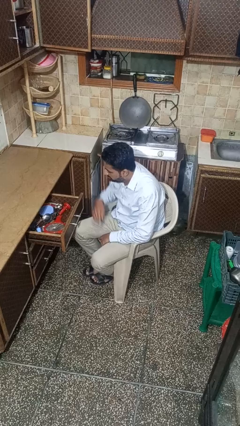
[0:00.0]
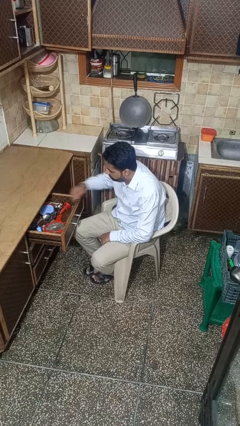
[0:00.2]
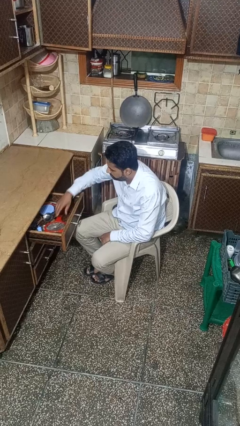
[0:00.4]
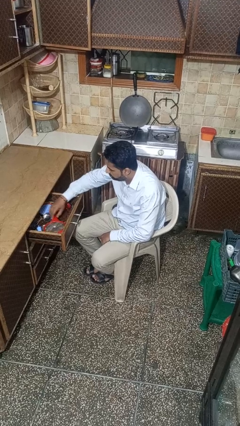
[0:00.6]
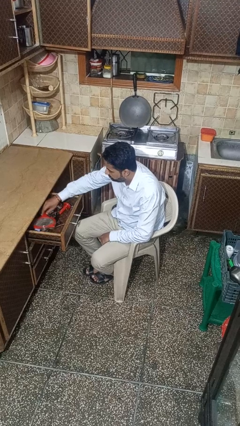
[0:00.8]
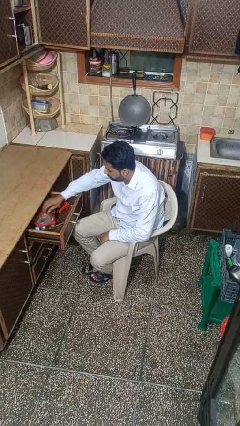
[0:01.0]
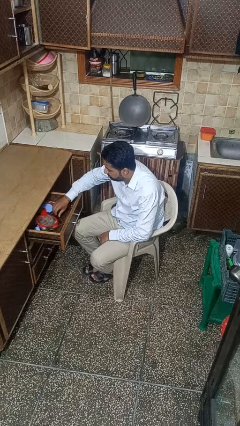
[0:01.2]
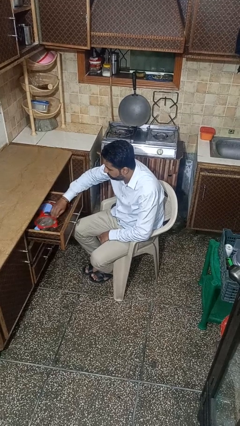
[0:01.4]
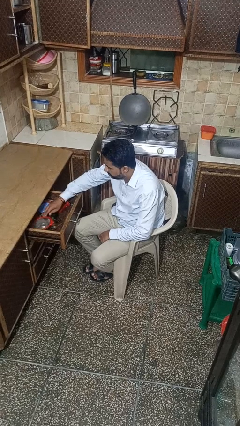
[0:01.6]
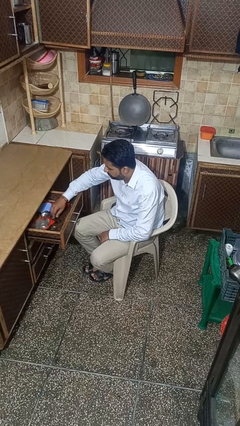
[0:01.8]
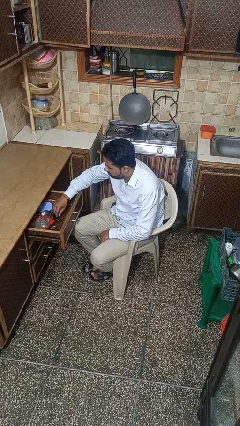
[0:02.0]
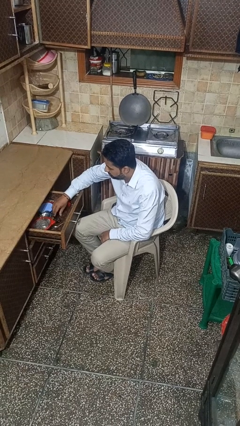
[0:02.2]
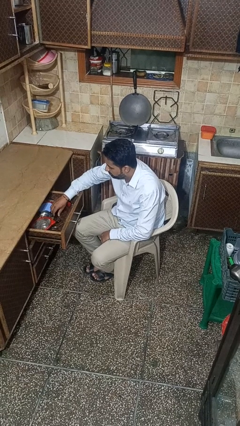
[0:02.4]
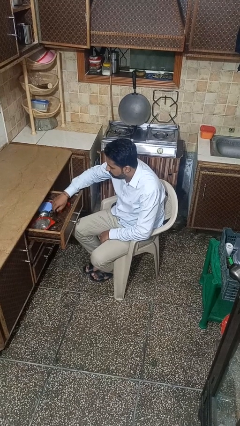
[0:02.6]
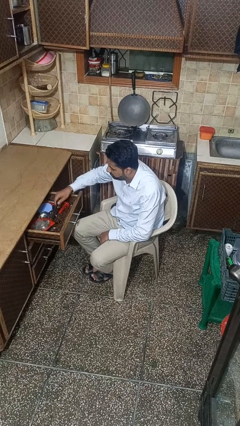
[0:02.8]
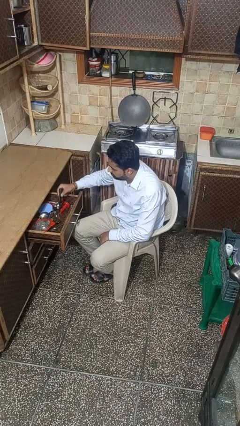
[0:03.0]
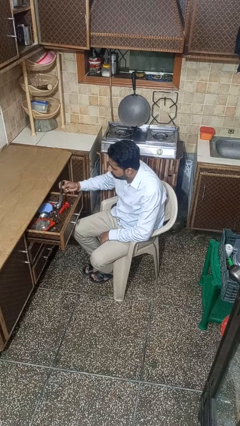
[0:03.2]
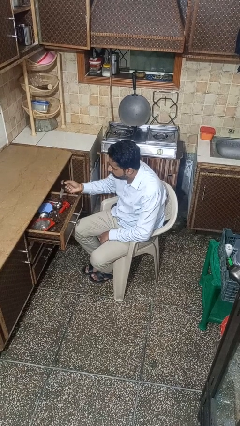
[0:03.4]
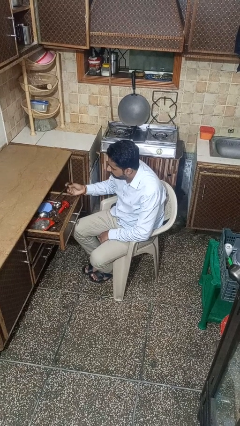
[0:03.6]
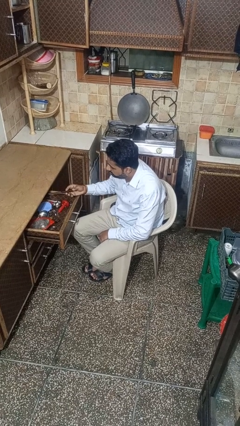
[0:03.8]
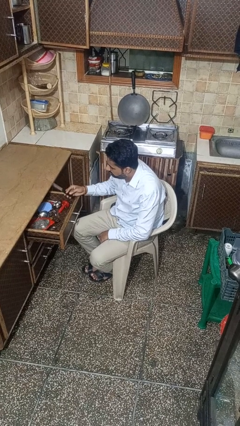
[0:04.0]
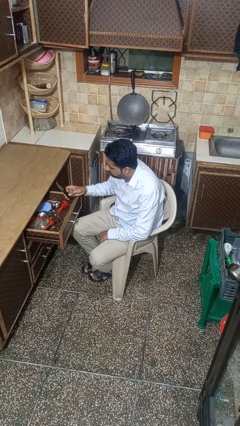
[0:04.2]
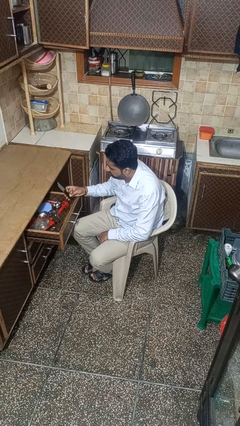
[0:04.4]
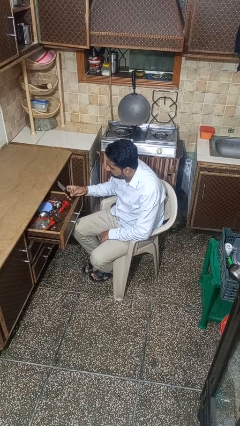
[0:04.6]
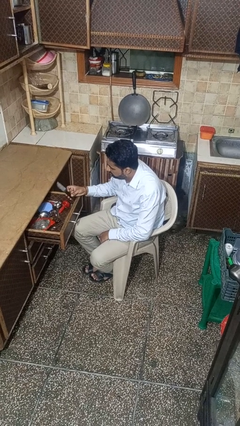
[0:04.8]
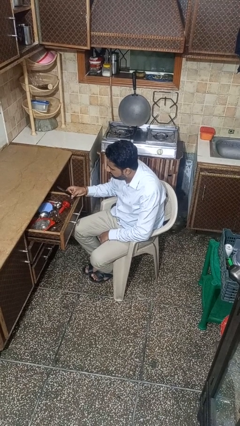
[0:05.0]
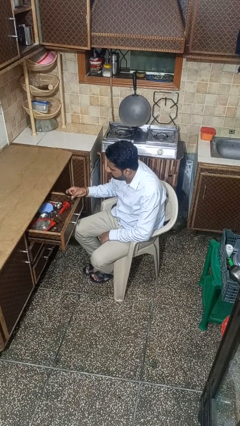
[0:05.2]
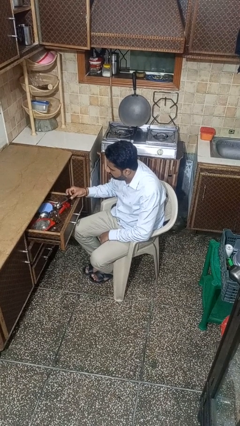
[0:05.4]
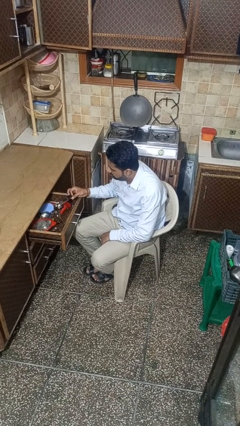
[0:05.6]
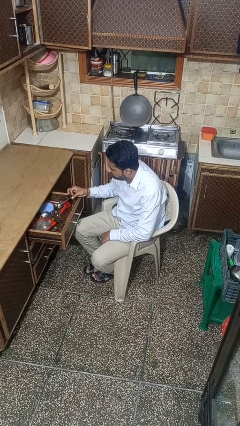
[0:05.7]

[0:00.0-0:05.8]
person takes object from kitchen drawer

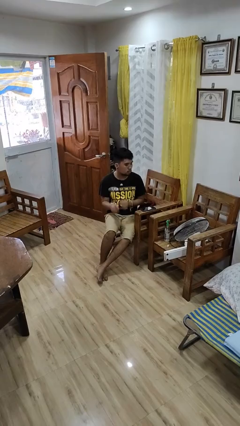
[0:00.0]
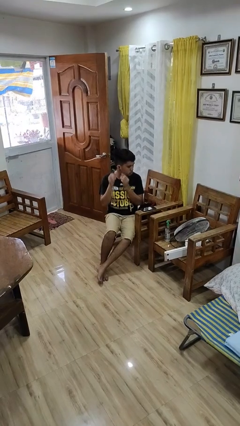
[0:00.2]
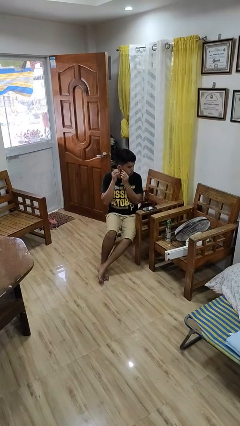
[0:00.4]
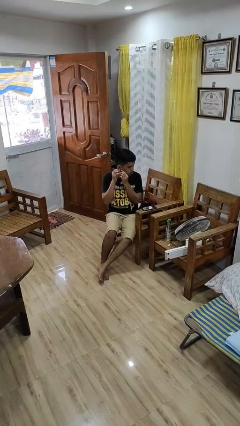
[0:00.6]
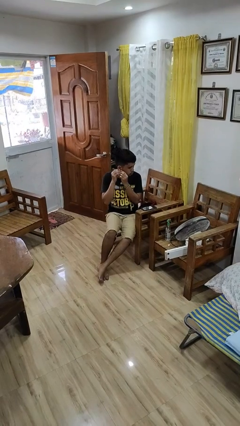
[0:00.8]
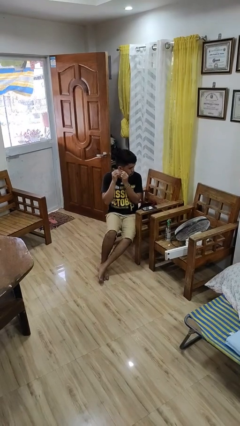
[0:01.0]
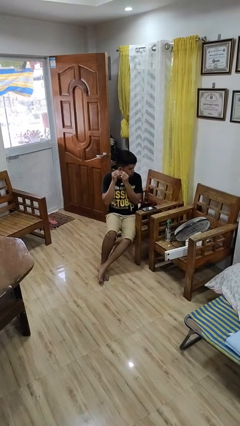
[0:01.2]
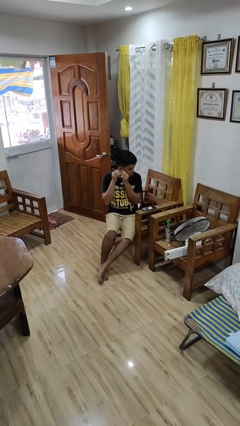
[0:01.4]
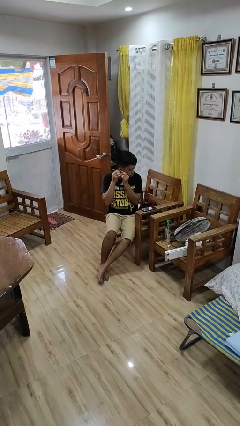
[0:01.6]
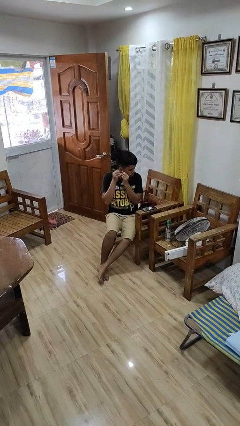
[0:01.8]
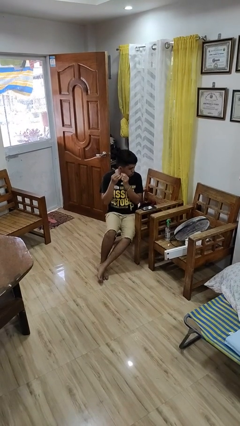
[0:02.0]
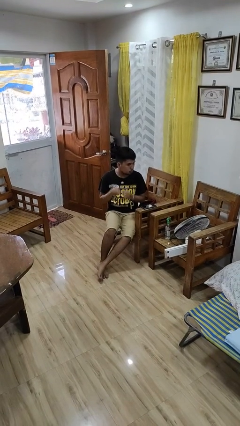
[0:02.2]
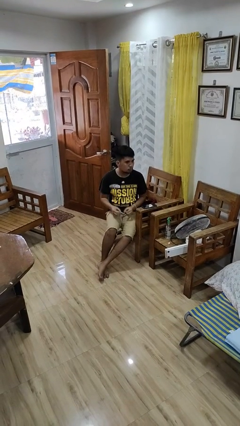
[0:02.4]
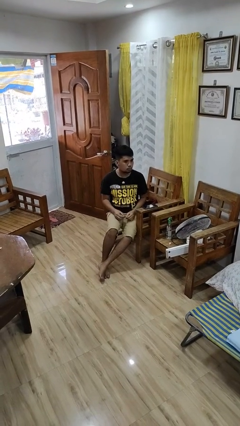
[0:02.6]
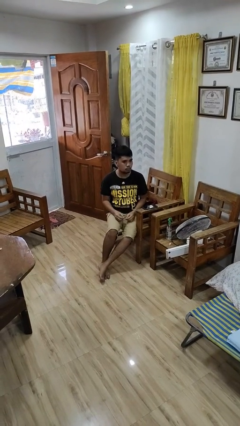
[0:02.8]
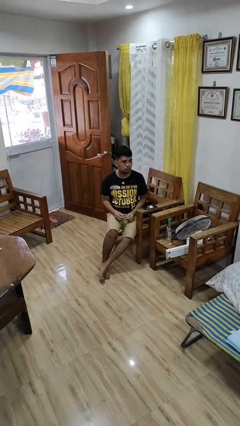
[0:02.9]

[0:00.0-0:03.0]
person takes off earrings

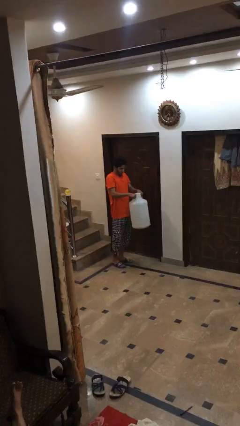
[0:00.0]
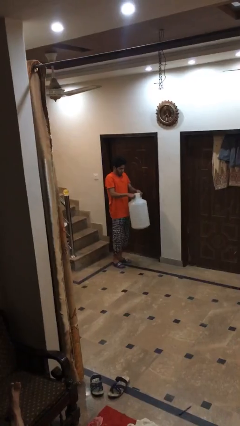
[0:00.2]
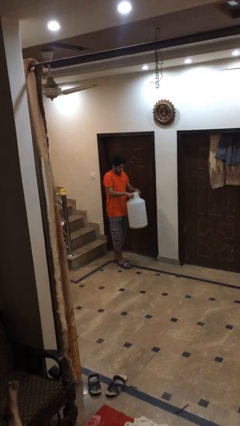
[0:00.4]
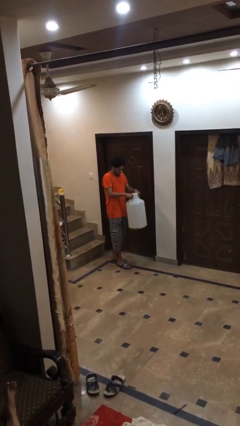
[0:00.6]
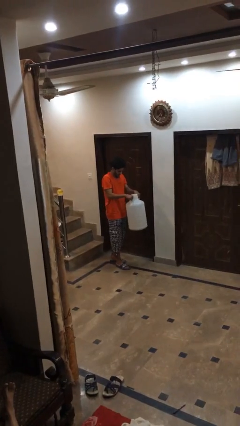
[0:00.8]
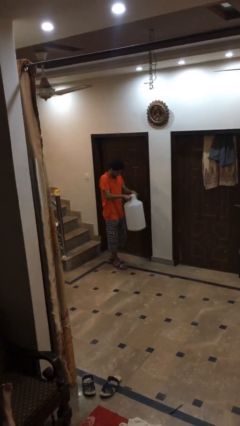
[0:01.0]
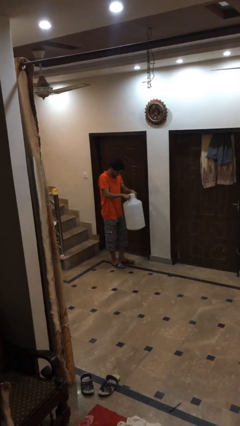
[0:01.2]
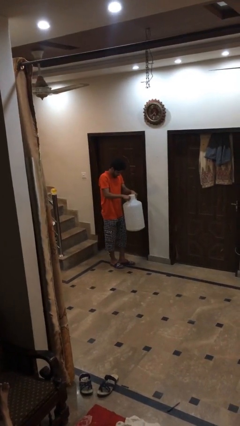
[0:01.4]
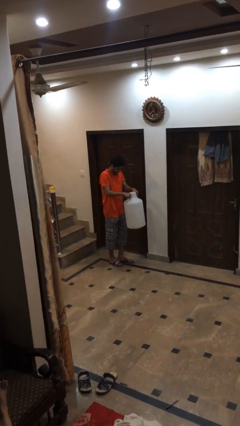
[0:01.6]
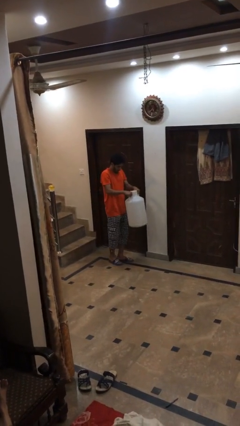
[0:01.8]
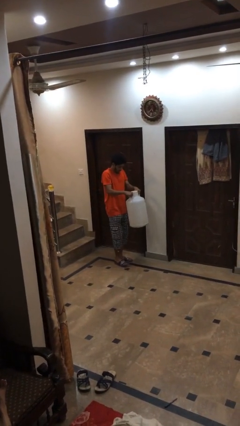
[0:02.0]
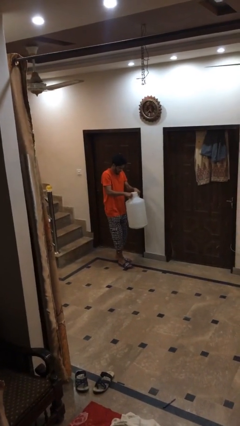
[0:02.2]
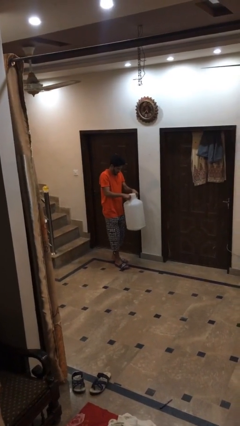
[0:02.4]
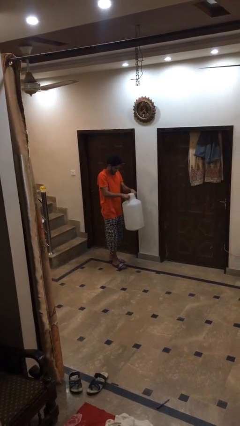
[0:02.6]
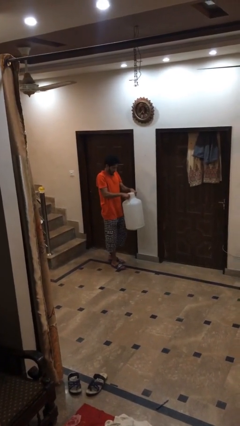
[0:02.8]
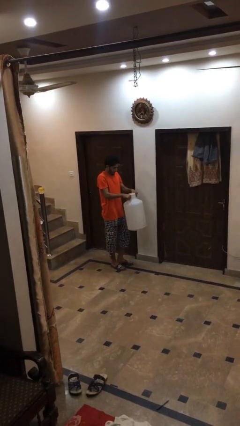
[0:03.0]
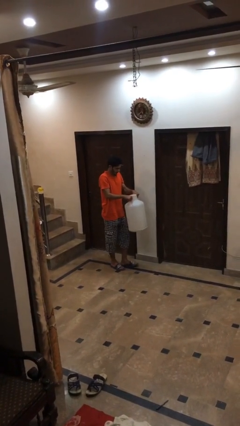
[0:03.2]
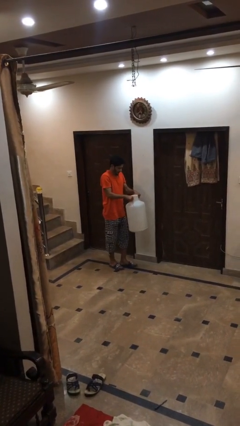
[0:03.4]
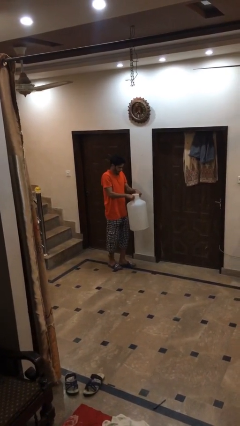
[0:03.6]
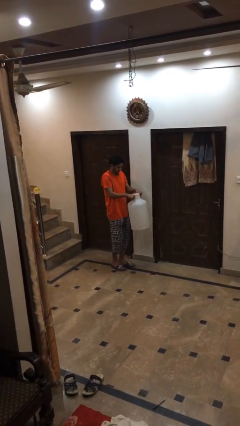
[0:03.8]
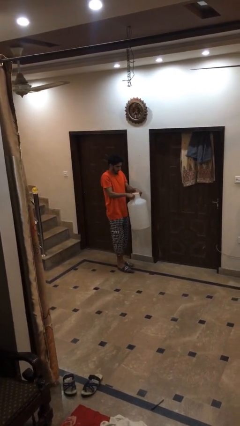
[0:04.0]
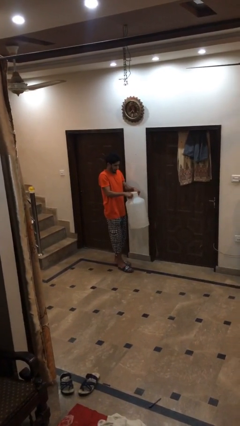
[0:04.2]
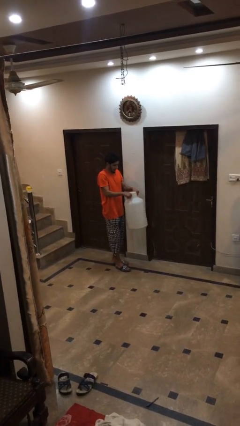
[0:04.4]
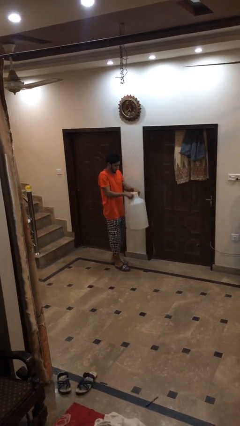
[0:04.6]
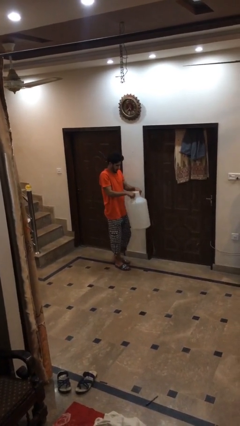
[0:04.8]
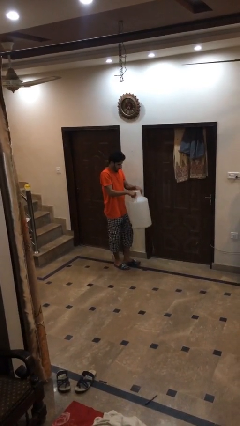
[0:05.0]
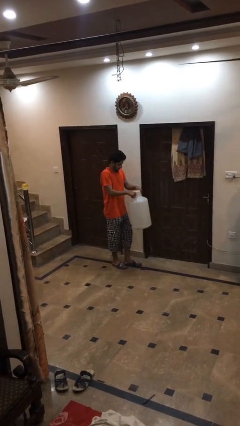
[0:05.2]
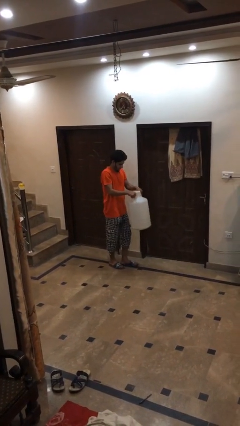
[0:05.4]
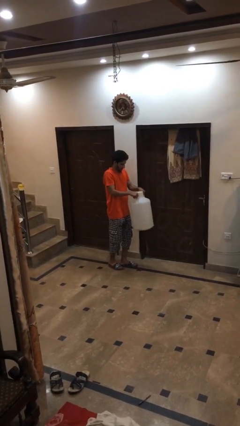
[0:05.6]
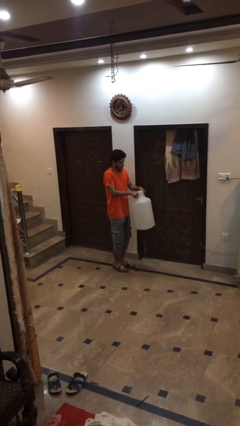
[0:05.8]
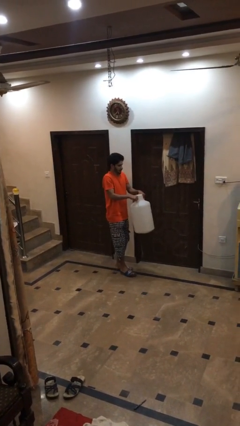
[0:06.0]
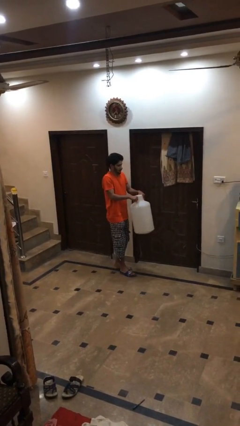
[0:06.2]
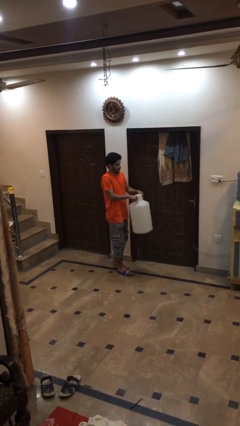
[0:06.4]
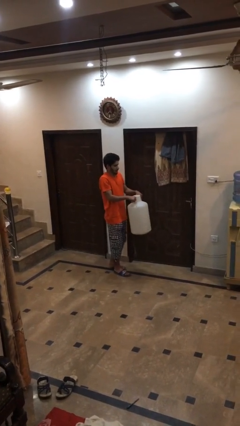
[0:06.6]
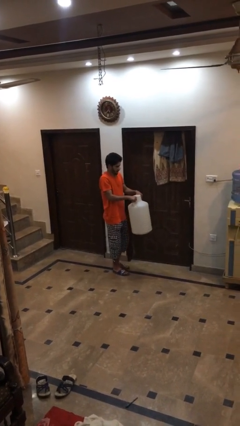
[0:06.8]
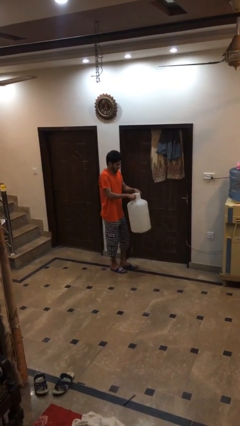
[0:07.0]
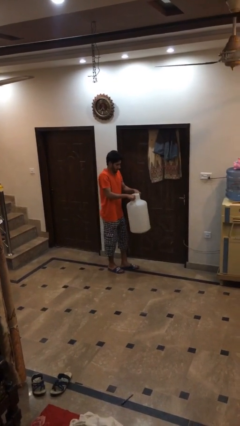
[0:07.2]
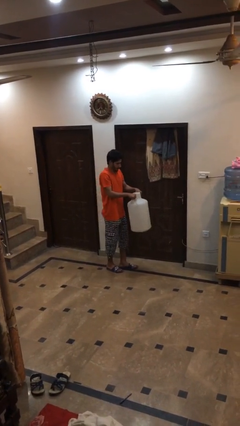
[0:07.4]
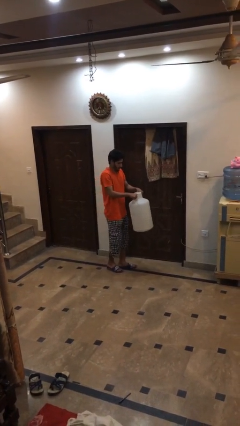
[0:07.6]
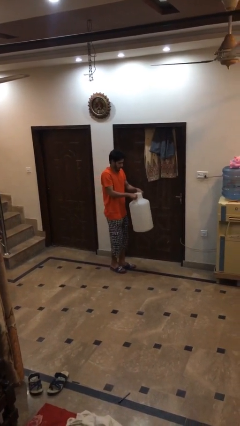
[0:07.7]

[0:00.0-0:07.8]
person carries heavy object

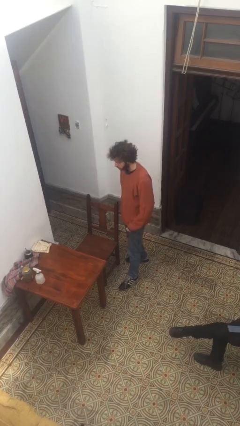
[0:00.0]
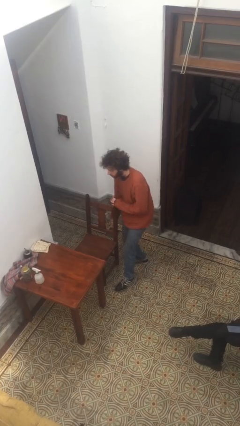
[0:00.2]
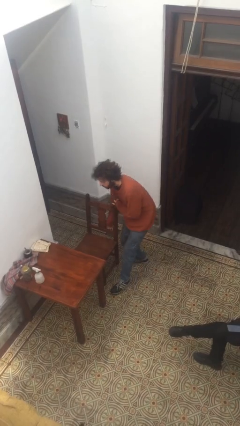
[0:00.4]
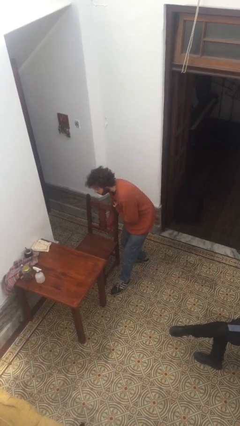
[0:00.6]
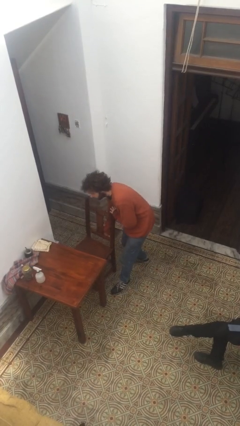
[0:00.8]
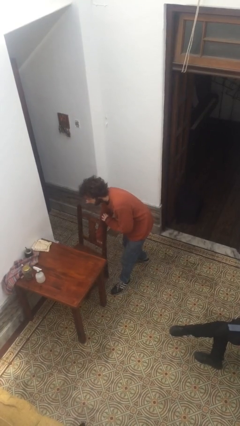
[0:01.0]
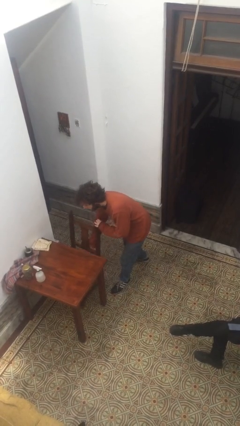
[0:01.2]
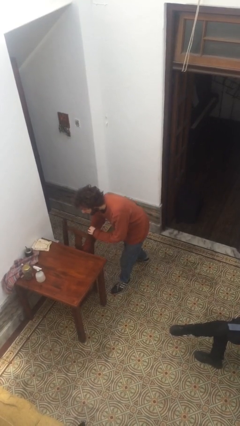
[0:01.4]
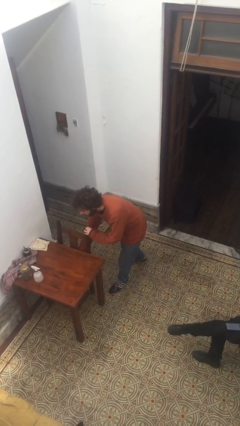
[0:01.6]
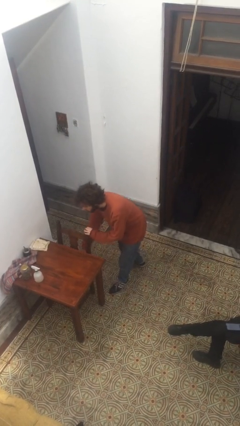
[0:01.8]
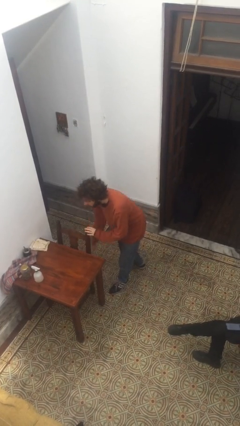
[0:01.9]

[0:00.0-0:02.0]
person pushes in chair
